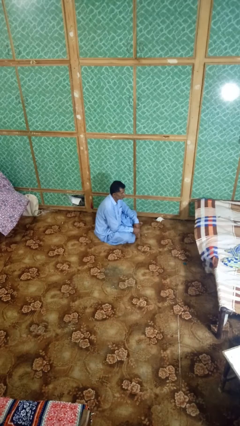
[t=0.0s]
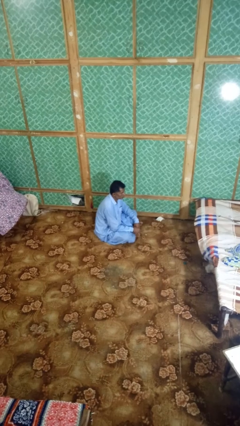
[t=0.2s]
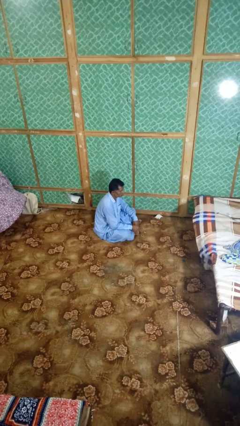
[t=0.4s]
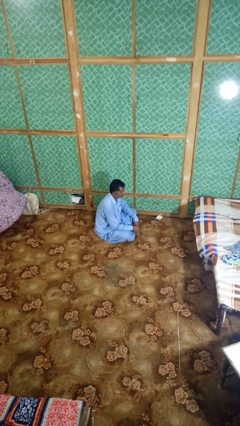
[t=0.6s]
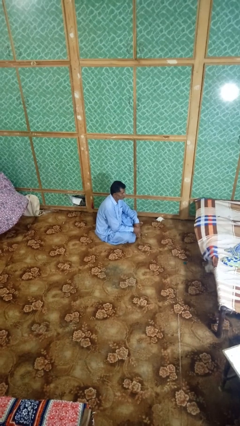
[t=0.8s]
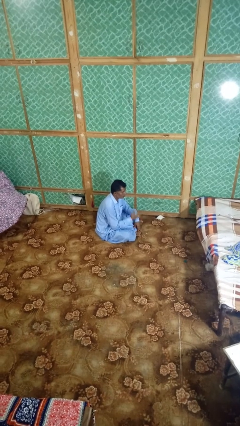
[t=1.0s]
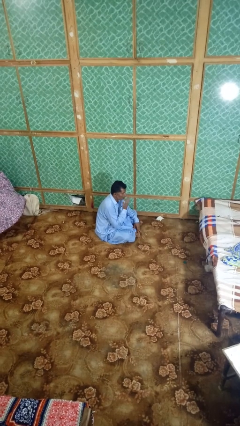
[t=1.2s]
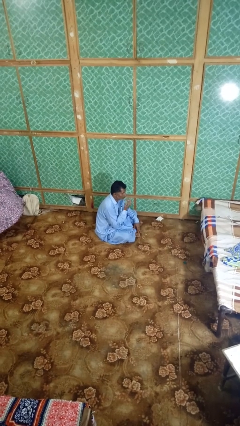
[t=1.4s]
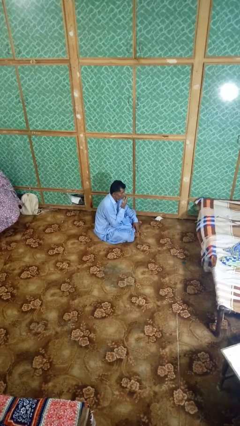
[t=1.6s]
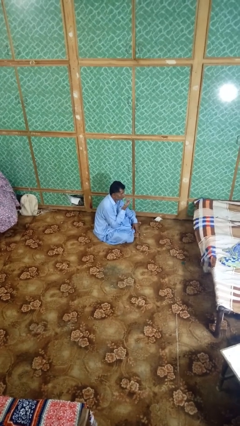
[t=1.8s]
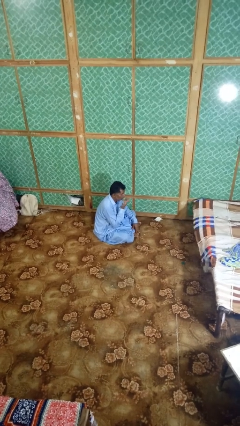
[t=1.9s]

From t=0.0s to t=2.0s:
person licks fingers

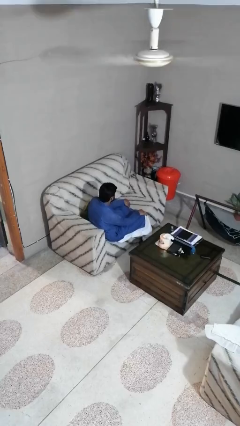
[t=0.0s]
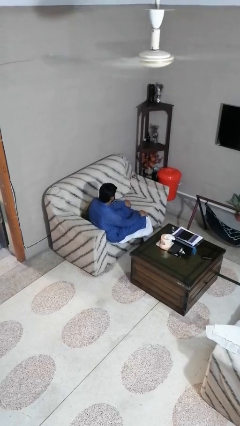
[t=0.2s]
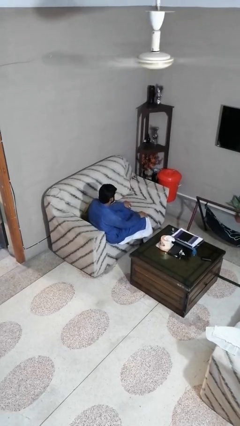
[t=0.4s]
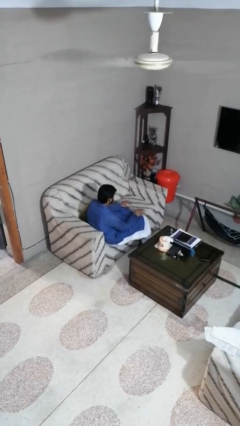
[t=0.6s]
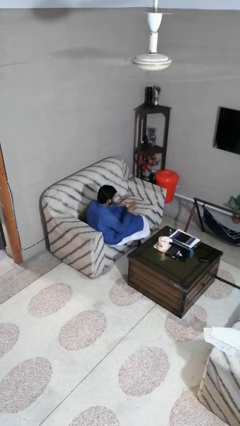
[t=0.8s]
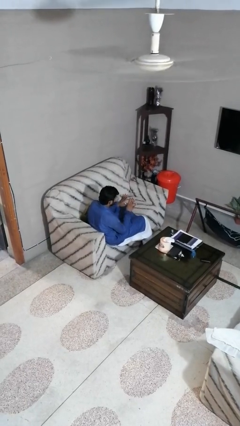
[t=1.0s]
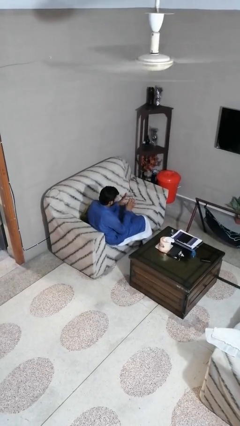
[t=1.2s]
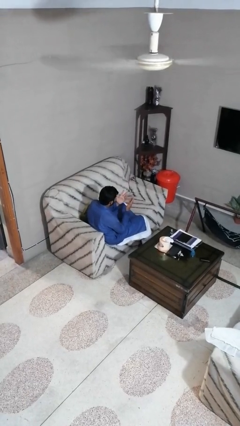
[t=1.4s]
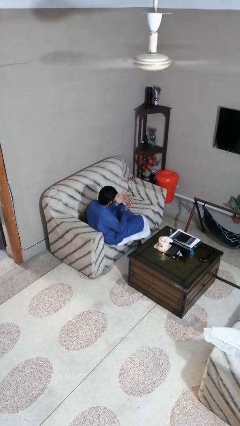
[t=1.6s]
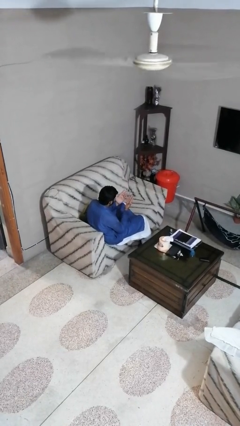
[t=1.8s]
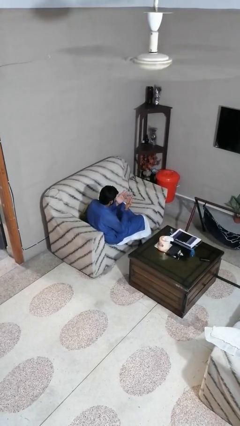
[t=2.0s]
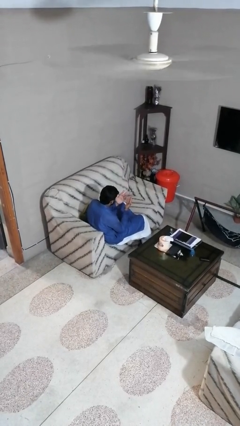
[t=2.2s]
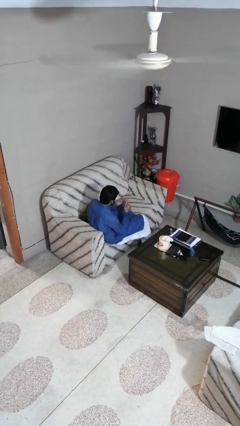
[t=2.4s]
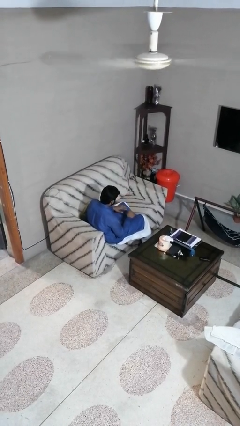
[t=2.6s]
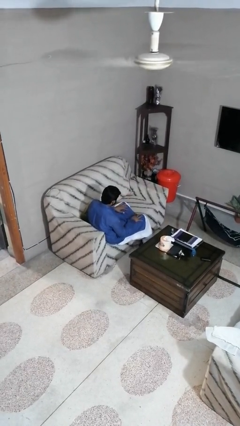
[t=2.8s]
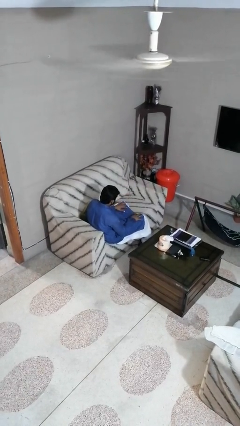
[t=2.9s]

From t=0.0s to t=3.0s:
person looks at hands in lap

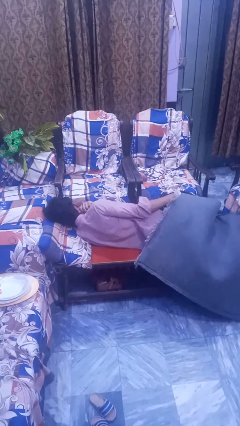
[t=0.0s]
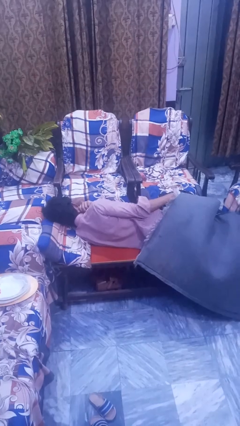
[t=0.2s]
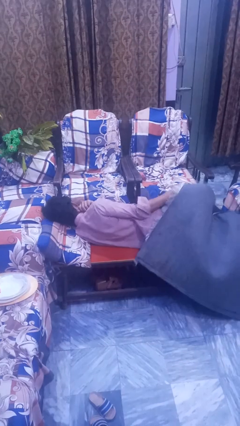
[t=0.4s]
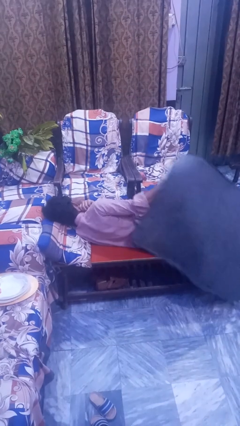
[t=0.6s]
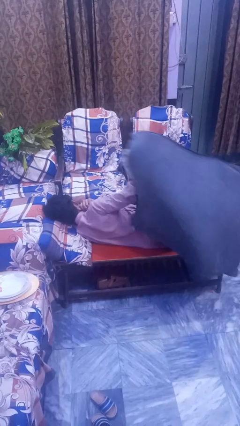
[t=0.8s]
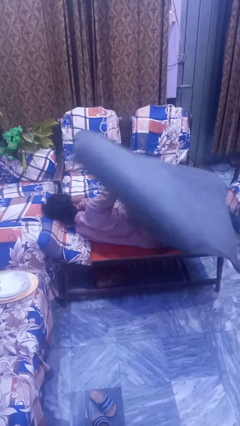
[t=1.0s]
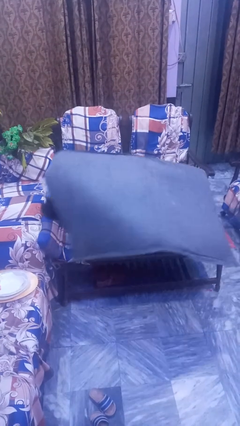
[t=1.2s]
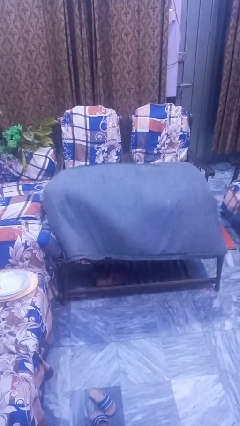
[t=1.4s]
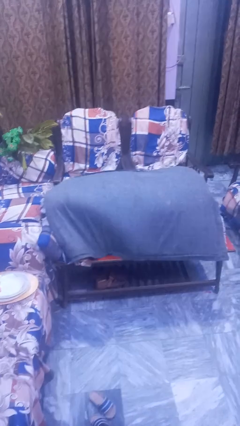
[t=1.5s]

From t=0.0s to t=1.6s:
person covers with blanket

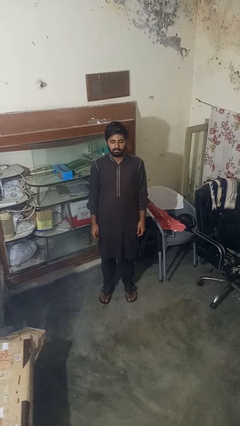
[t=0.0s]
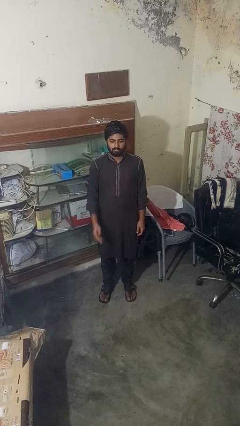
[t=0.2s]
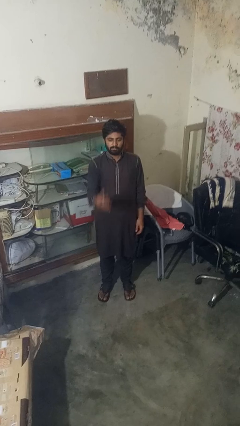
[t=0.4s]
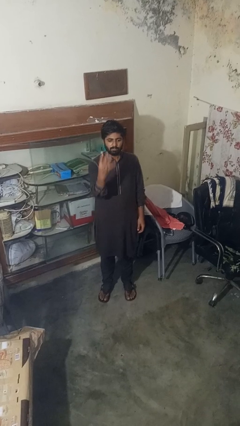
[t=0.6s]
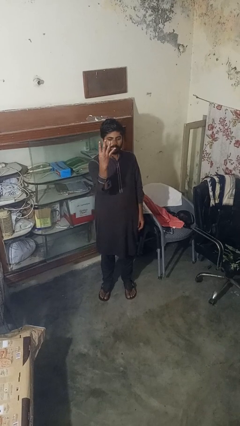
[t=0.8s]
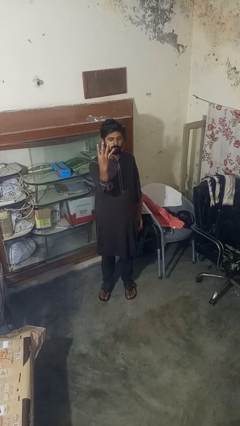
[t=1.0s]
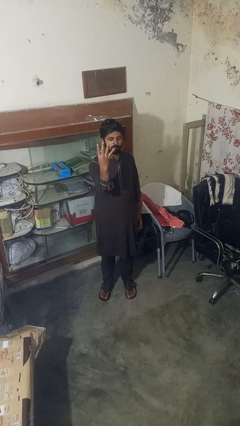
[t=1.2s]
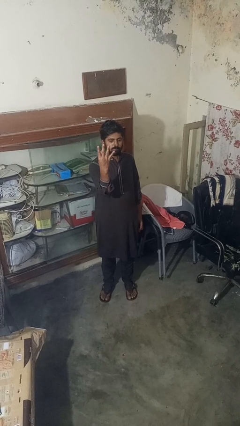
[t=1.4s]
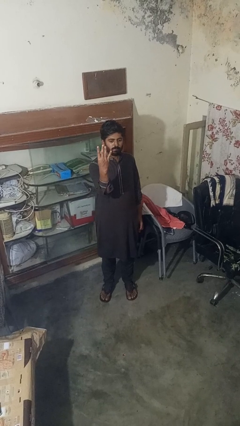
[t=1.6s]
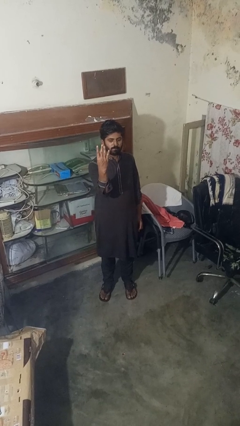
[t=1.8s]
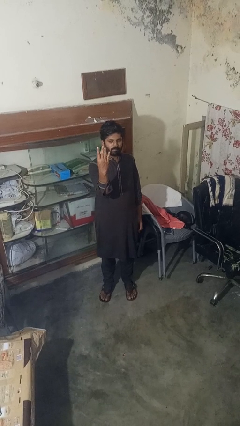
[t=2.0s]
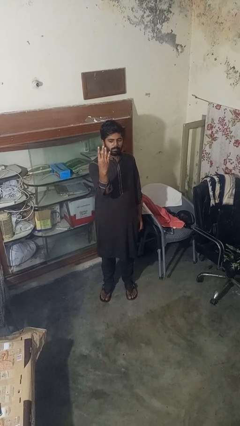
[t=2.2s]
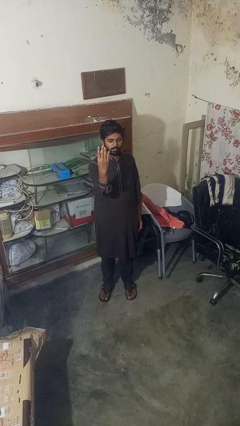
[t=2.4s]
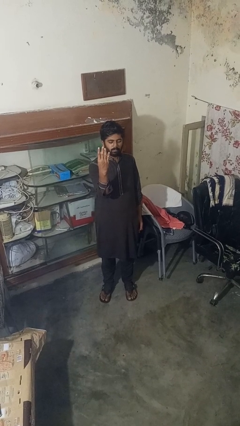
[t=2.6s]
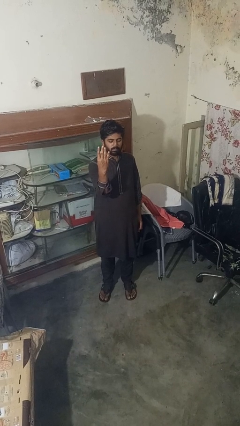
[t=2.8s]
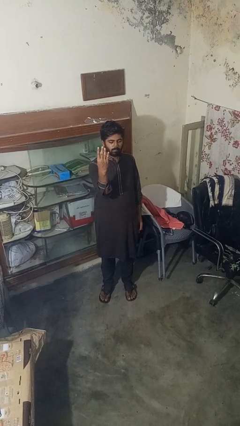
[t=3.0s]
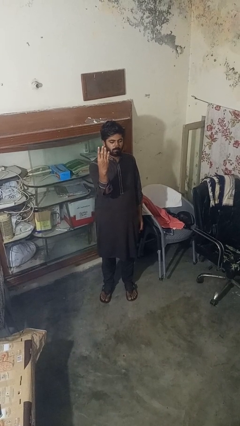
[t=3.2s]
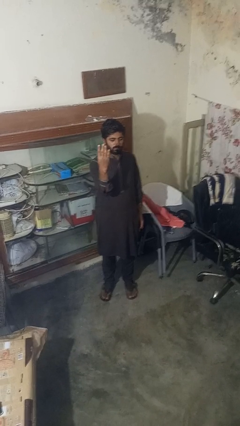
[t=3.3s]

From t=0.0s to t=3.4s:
person gestures number four

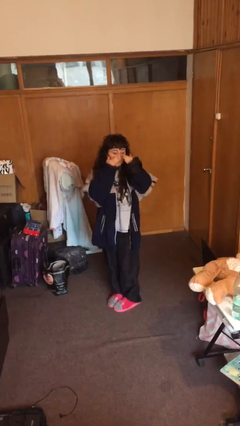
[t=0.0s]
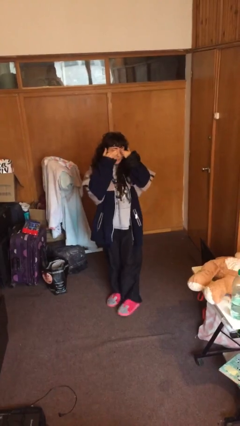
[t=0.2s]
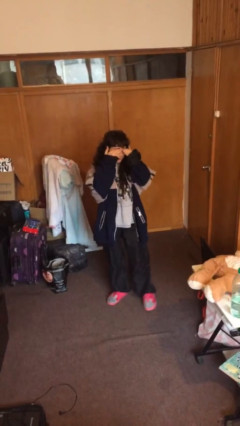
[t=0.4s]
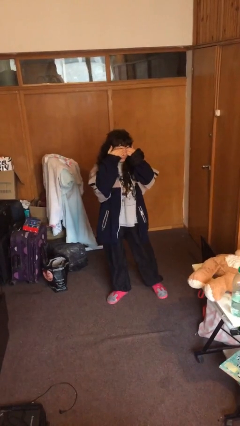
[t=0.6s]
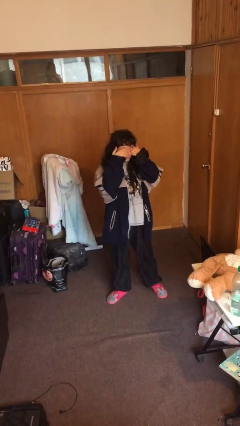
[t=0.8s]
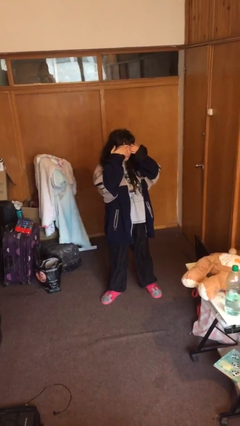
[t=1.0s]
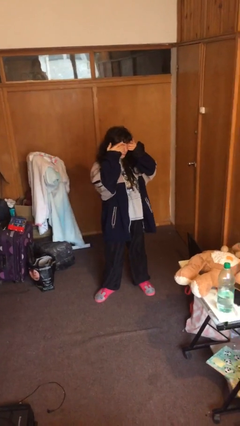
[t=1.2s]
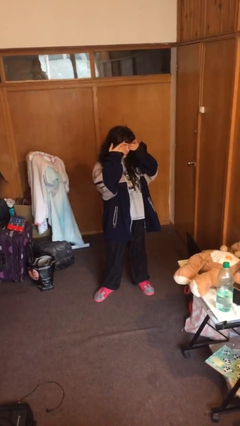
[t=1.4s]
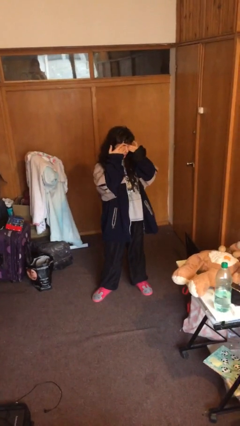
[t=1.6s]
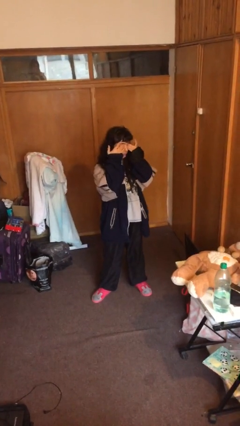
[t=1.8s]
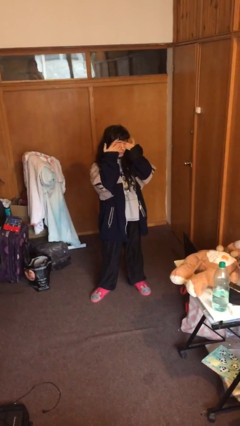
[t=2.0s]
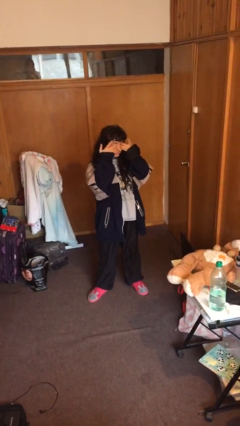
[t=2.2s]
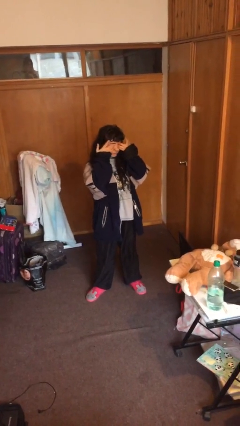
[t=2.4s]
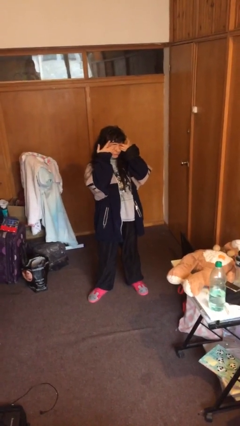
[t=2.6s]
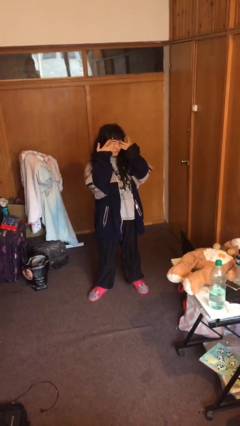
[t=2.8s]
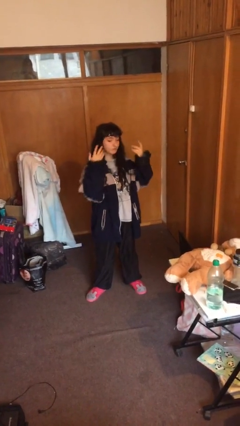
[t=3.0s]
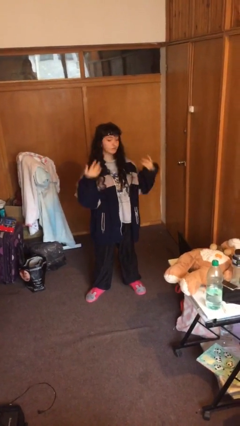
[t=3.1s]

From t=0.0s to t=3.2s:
person rubs eyes

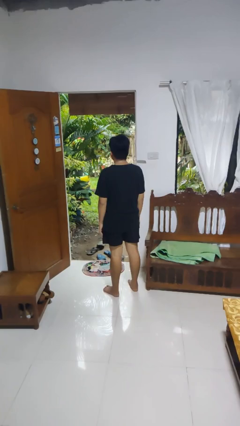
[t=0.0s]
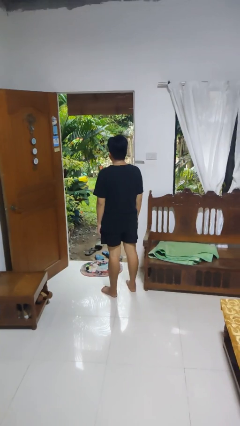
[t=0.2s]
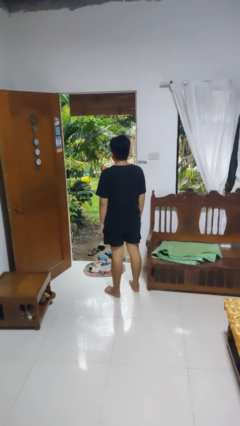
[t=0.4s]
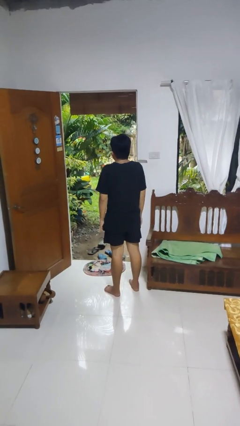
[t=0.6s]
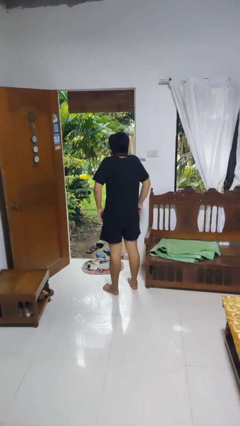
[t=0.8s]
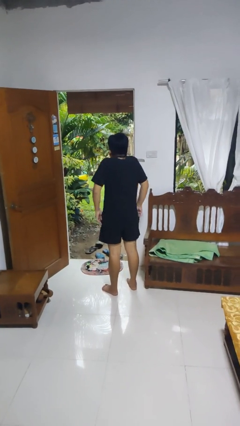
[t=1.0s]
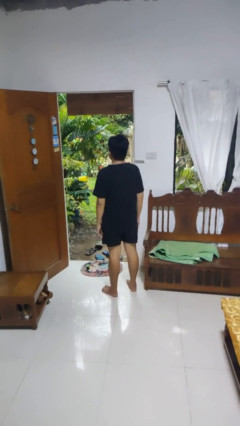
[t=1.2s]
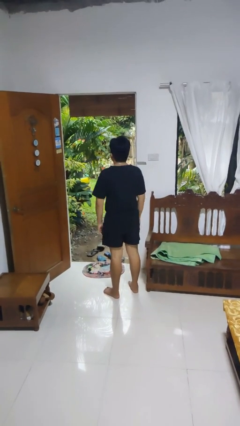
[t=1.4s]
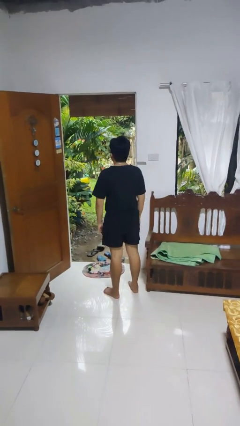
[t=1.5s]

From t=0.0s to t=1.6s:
person shrugs

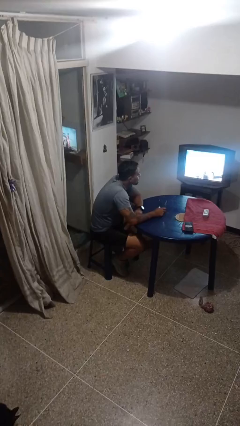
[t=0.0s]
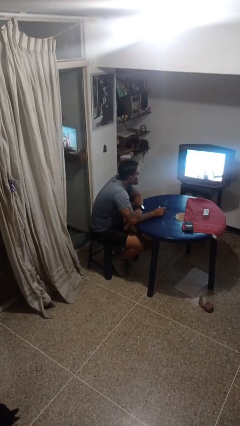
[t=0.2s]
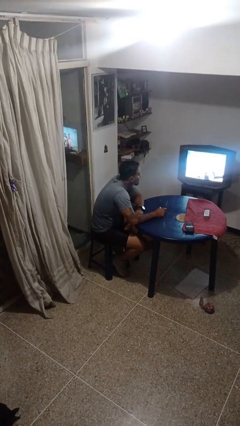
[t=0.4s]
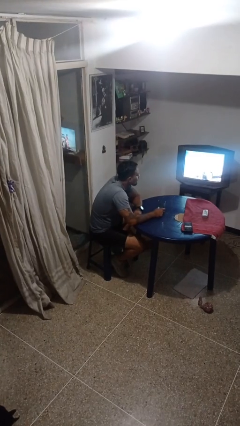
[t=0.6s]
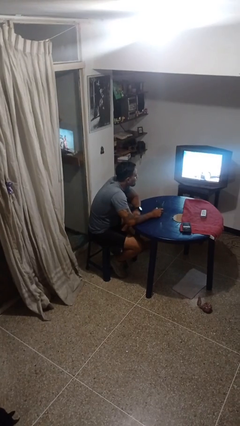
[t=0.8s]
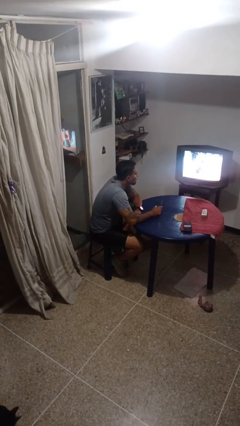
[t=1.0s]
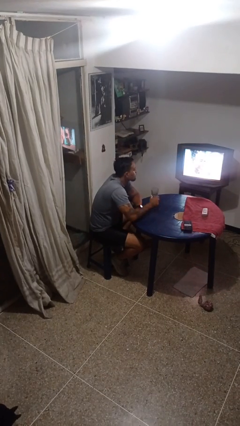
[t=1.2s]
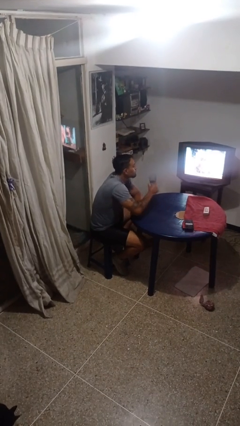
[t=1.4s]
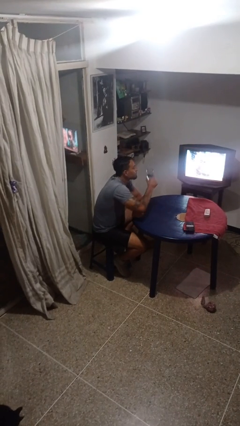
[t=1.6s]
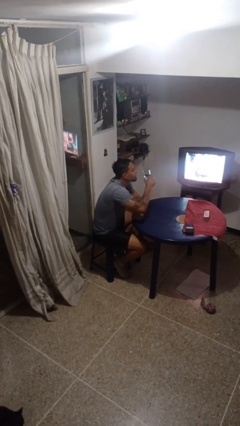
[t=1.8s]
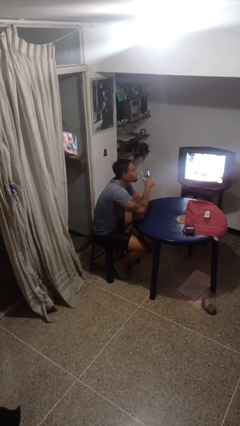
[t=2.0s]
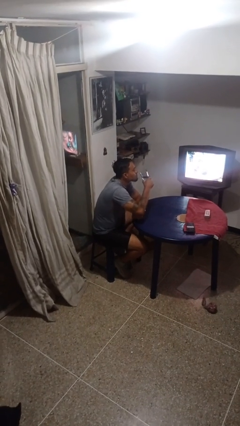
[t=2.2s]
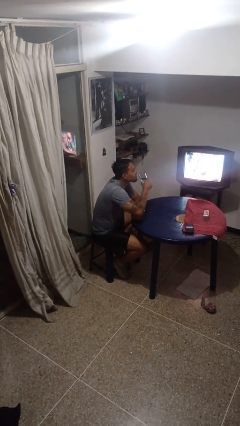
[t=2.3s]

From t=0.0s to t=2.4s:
person picks up object from table
